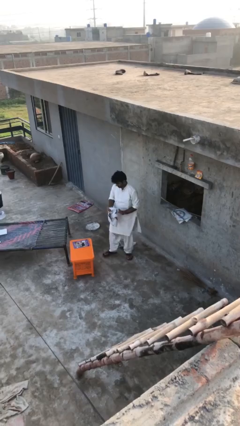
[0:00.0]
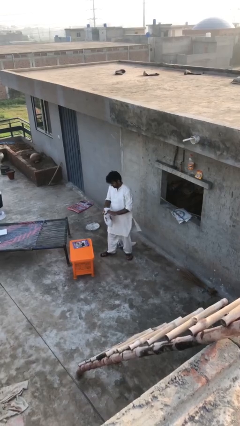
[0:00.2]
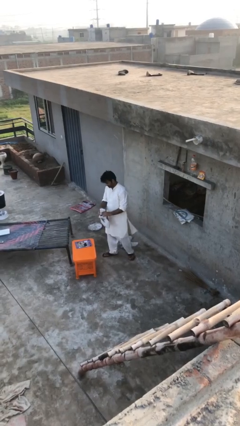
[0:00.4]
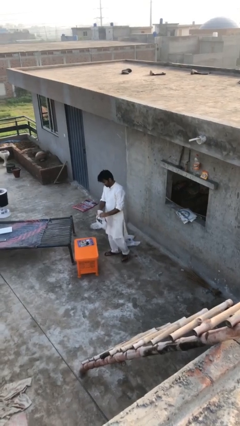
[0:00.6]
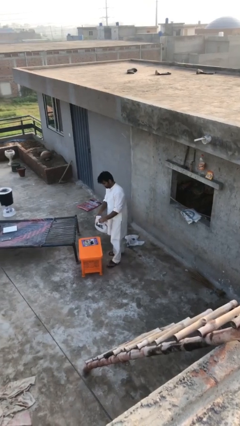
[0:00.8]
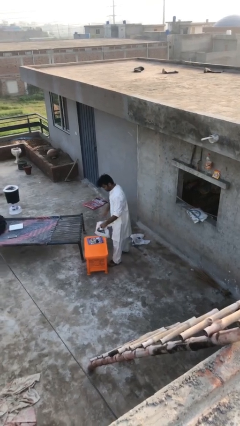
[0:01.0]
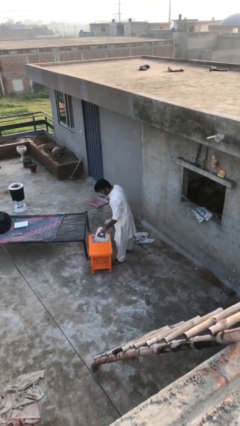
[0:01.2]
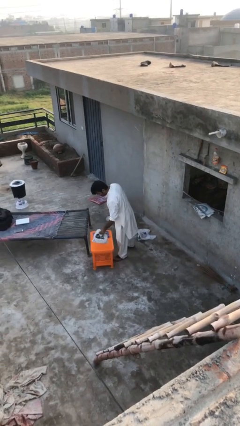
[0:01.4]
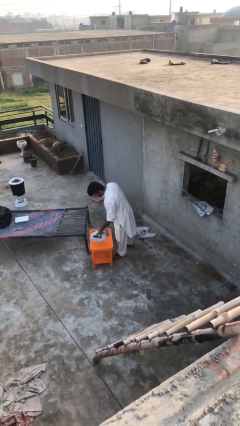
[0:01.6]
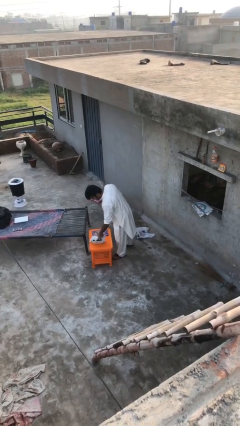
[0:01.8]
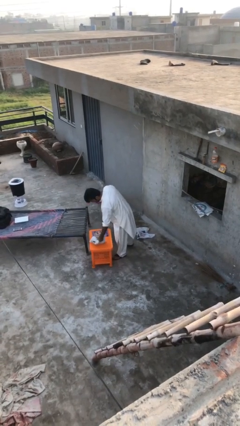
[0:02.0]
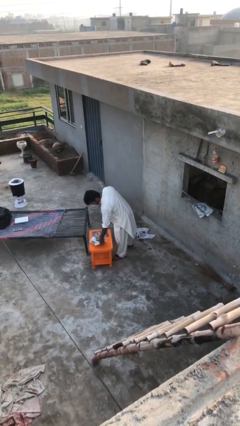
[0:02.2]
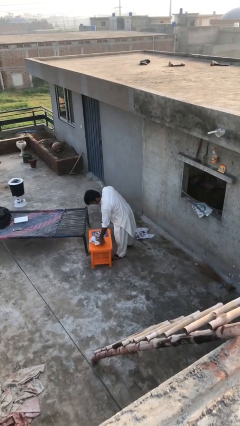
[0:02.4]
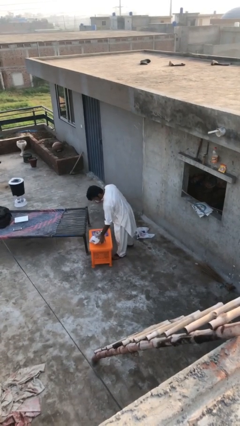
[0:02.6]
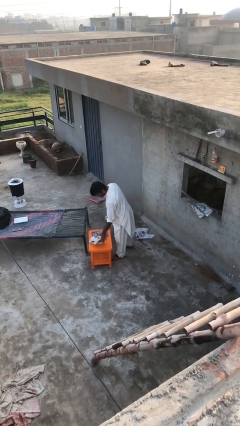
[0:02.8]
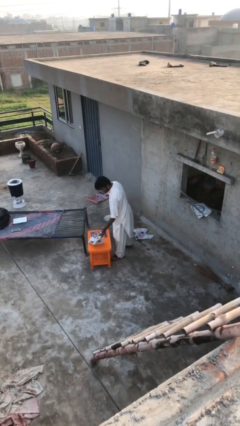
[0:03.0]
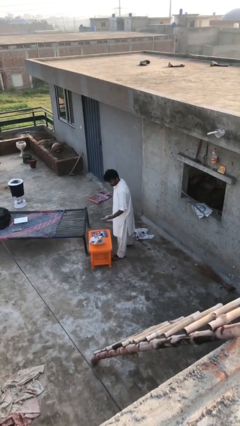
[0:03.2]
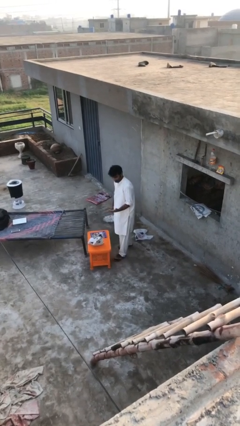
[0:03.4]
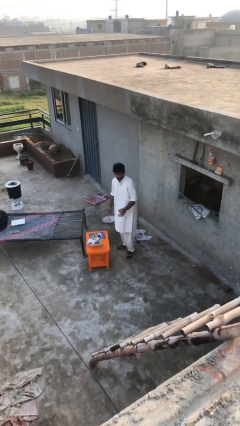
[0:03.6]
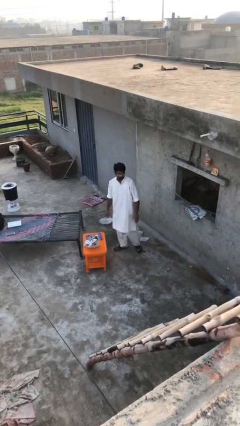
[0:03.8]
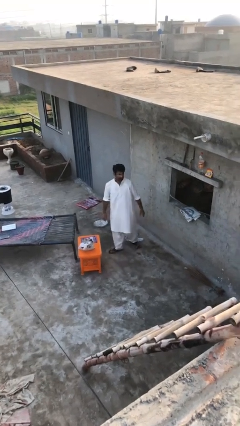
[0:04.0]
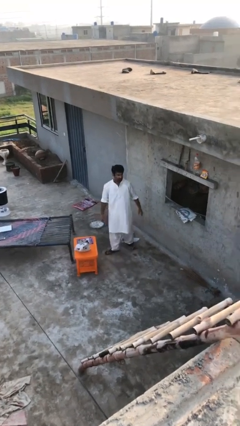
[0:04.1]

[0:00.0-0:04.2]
person puts down object on table

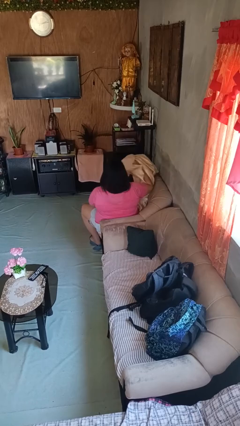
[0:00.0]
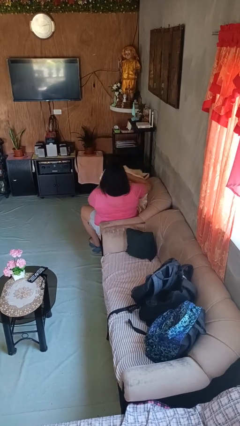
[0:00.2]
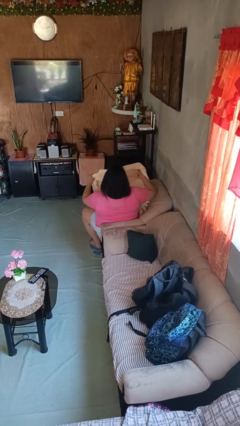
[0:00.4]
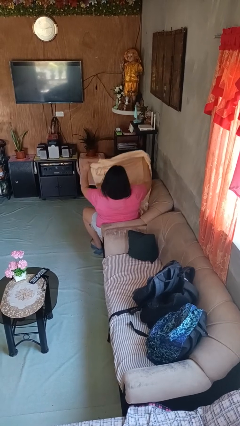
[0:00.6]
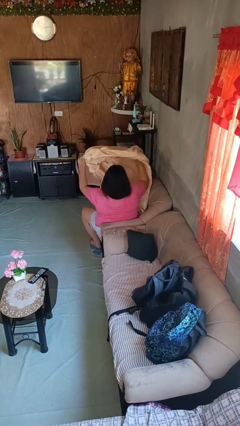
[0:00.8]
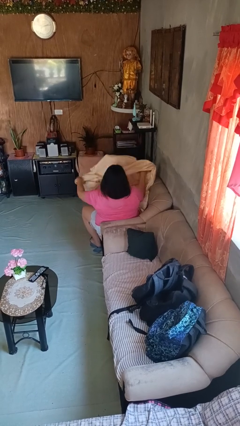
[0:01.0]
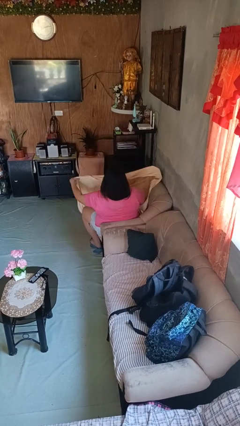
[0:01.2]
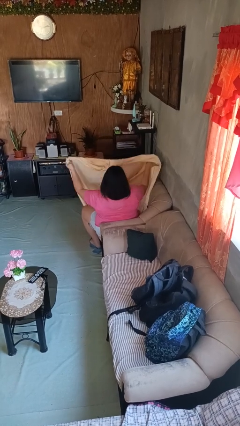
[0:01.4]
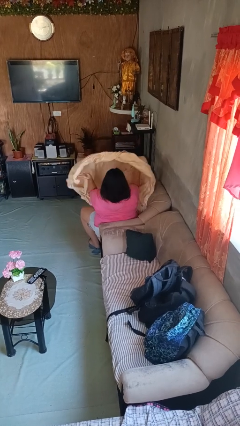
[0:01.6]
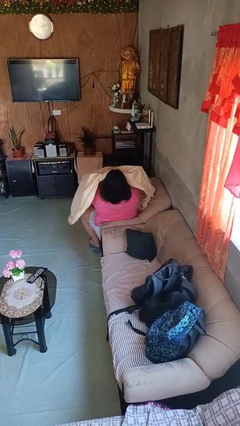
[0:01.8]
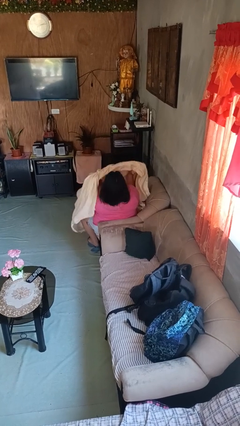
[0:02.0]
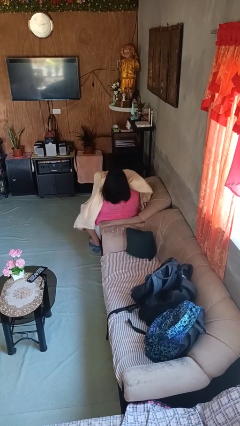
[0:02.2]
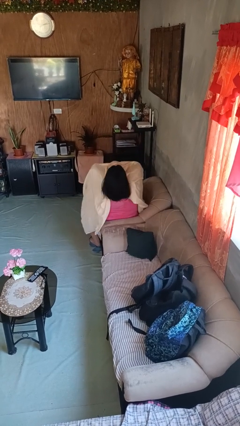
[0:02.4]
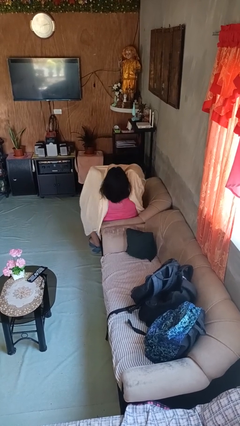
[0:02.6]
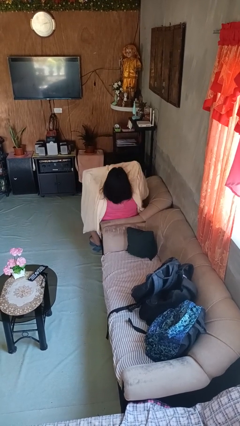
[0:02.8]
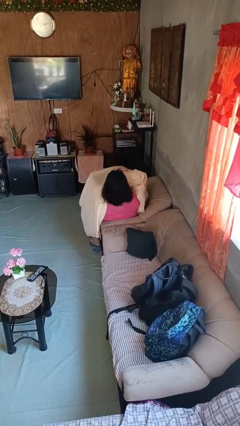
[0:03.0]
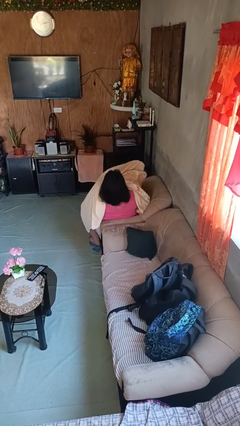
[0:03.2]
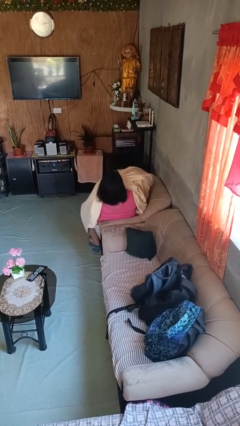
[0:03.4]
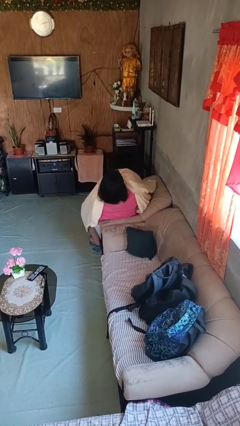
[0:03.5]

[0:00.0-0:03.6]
person covers with blanket

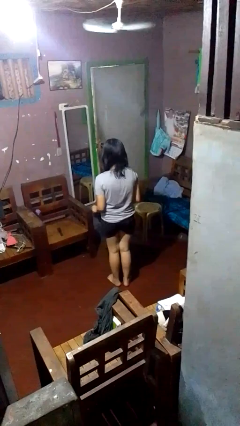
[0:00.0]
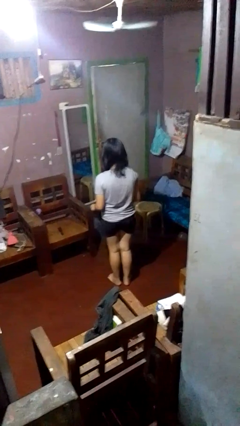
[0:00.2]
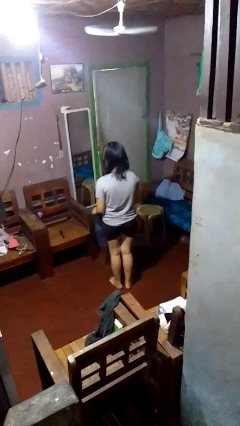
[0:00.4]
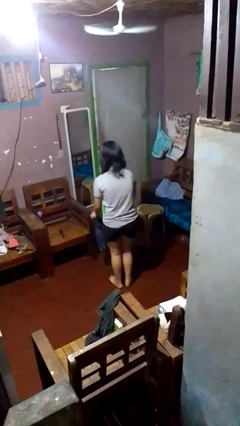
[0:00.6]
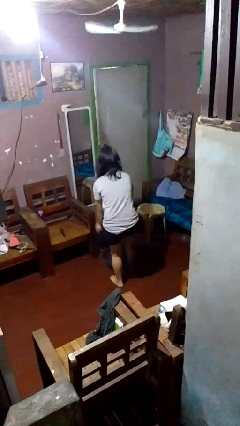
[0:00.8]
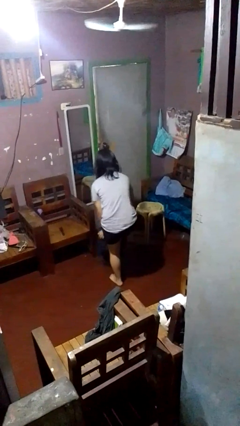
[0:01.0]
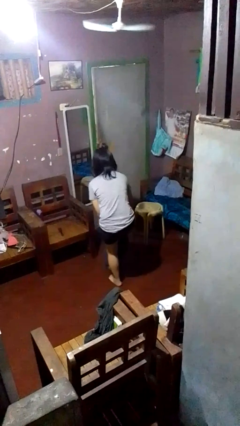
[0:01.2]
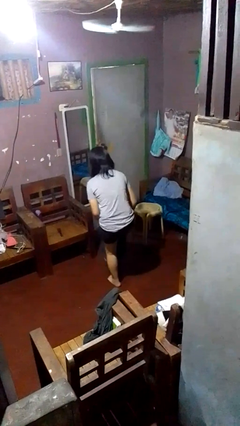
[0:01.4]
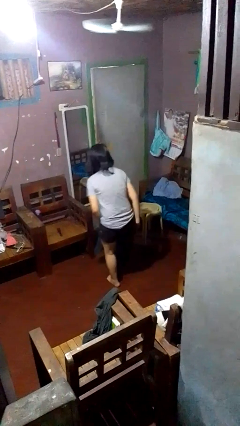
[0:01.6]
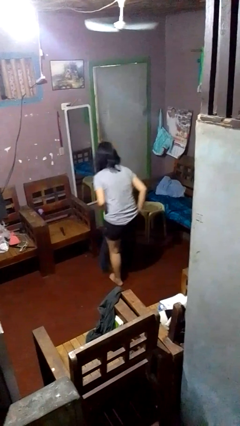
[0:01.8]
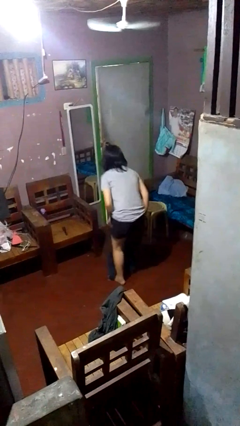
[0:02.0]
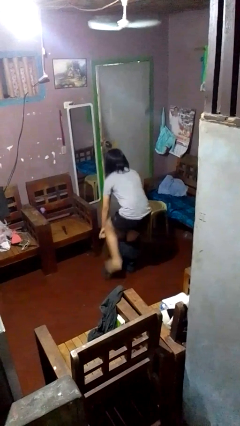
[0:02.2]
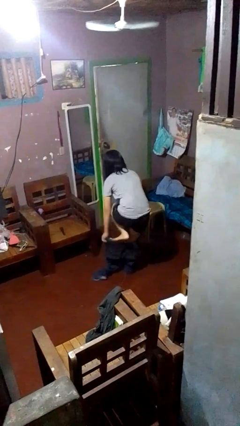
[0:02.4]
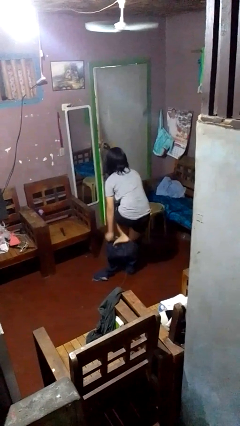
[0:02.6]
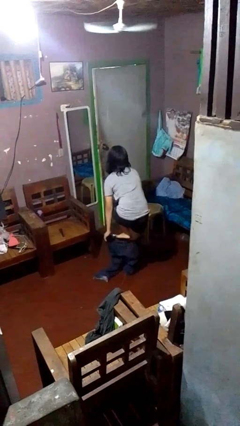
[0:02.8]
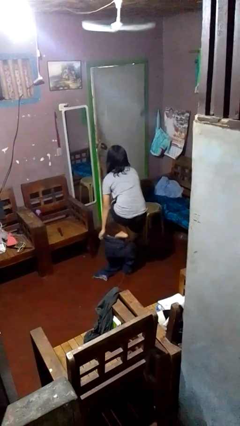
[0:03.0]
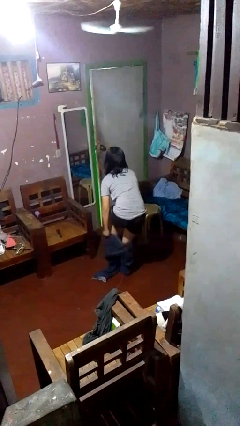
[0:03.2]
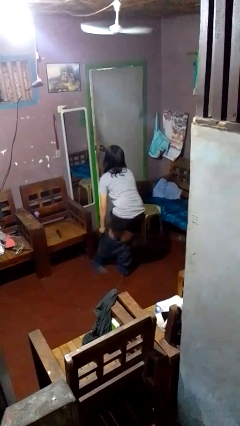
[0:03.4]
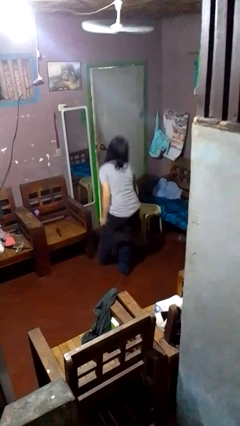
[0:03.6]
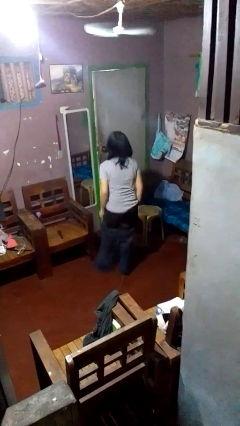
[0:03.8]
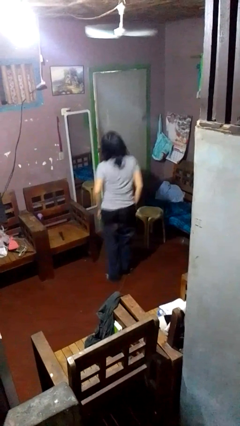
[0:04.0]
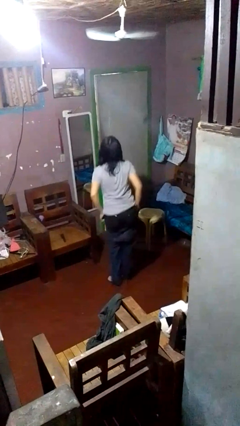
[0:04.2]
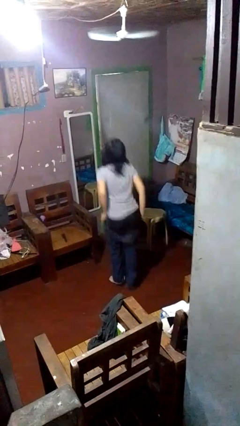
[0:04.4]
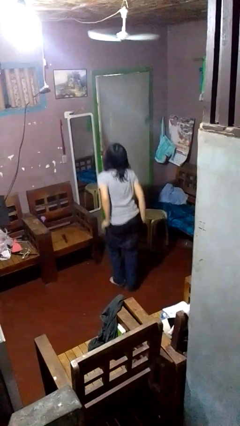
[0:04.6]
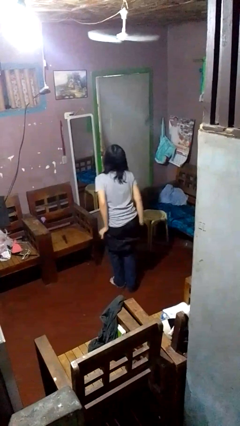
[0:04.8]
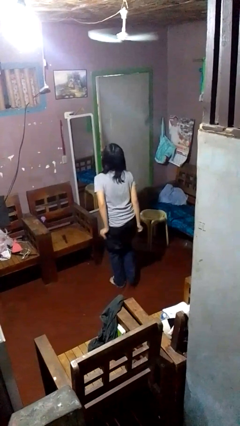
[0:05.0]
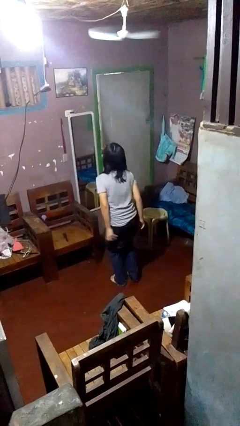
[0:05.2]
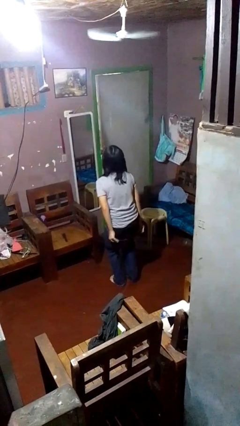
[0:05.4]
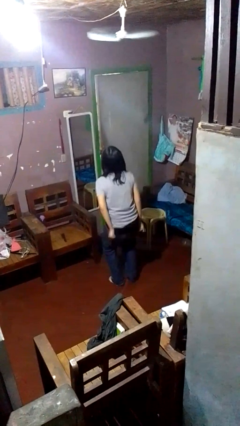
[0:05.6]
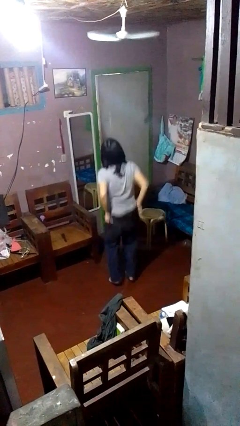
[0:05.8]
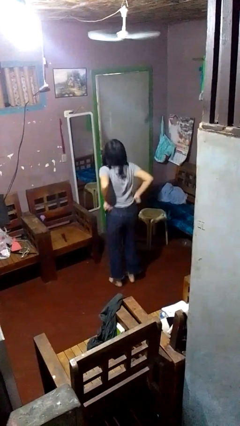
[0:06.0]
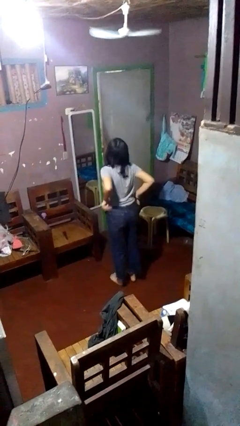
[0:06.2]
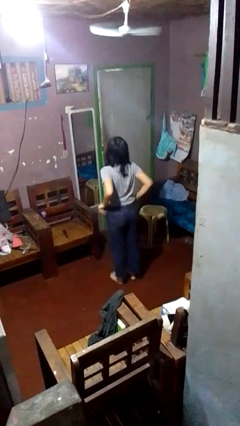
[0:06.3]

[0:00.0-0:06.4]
person puts on pants

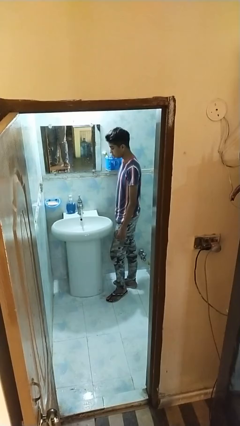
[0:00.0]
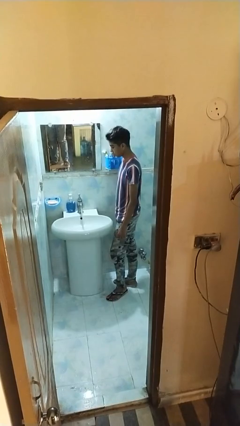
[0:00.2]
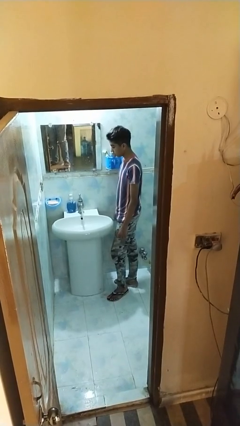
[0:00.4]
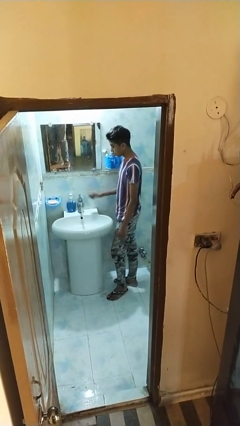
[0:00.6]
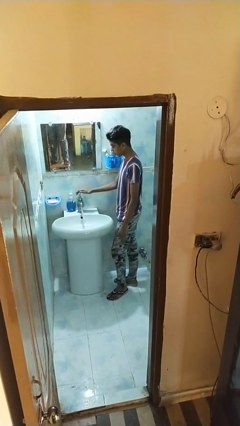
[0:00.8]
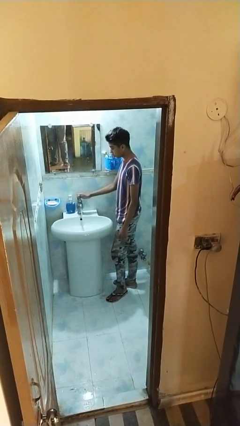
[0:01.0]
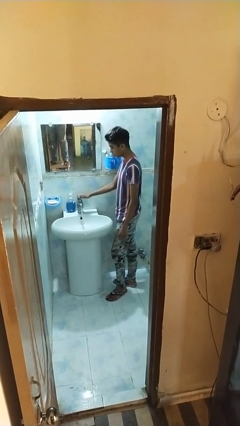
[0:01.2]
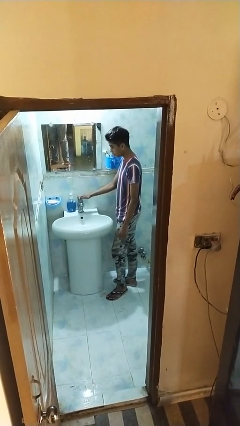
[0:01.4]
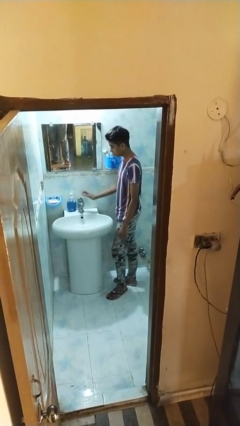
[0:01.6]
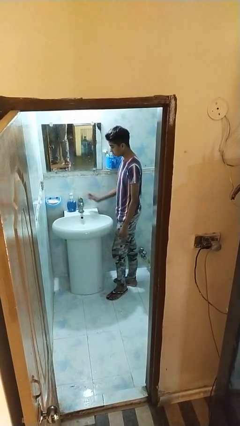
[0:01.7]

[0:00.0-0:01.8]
person turns off faucet

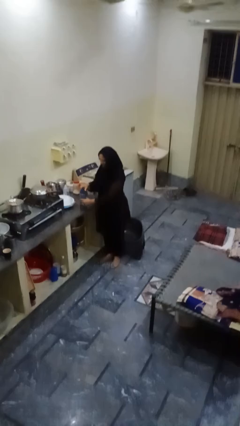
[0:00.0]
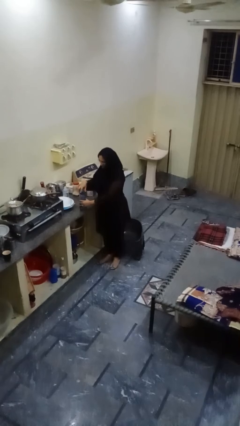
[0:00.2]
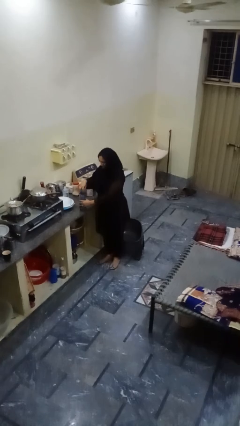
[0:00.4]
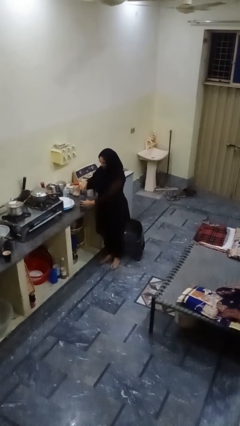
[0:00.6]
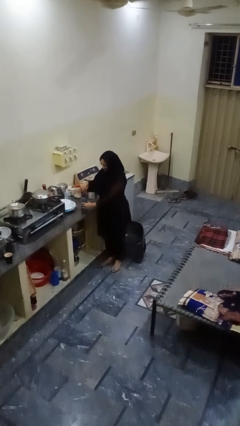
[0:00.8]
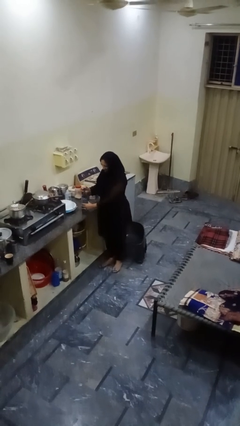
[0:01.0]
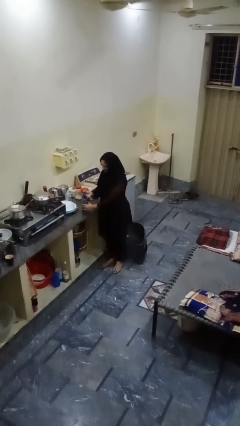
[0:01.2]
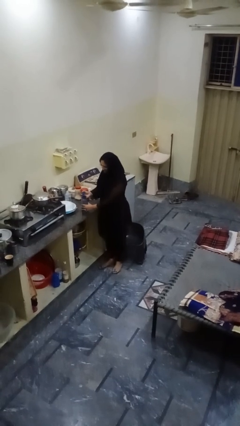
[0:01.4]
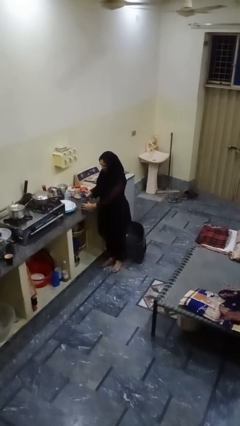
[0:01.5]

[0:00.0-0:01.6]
person unscrews lid from bottle
